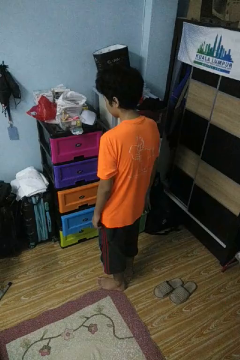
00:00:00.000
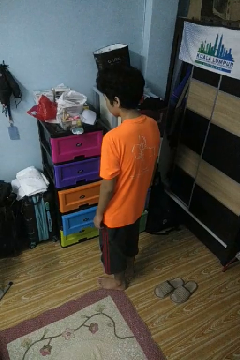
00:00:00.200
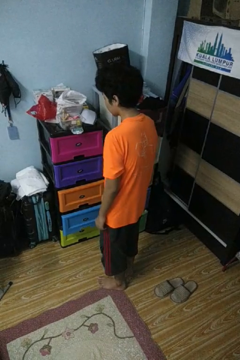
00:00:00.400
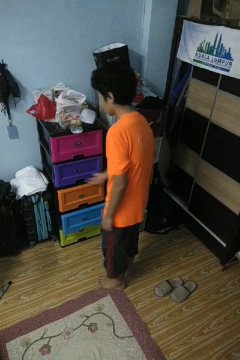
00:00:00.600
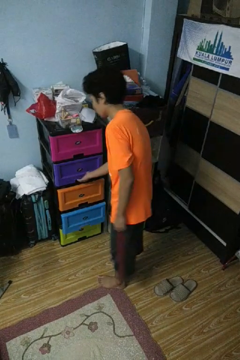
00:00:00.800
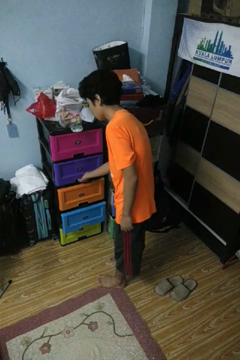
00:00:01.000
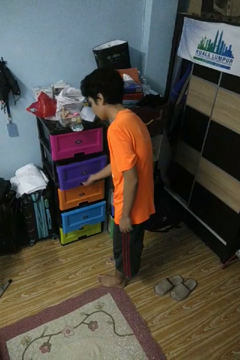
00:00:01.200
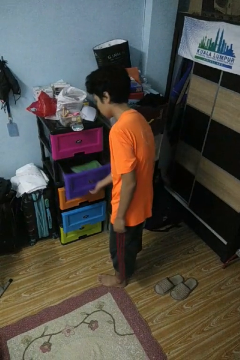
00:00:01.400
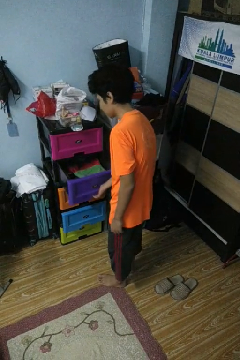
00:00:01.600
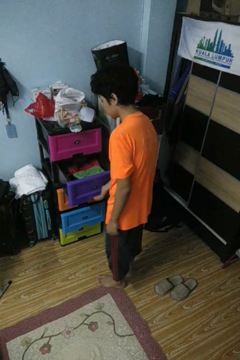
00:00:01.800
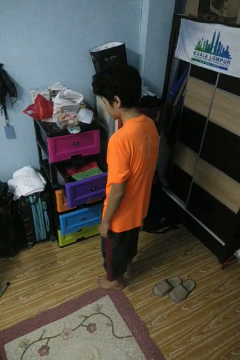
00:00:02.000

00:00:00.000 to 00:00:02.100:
person opens dresser drawer

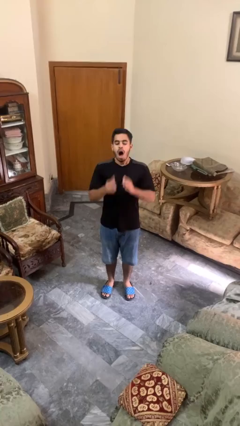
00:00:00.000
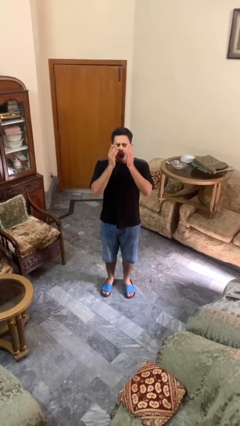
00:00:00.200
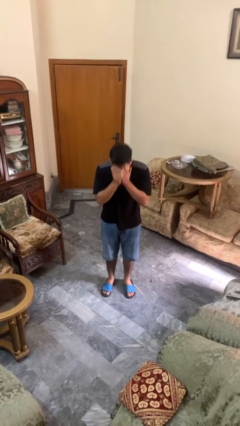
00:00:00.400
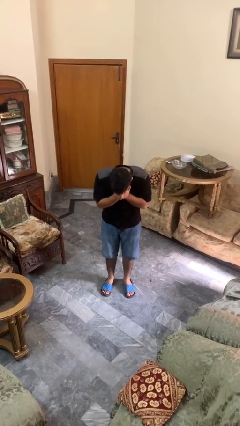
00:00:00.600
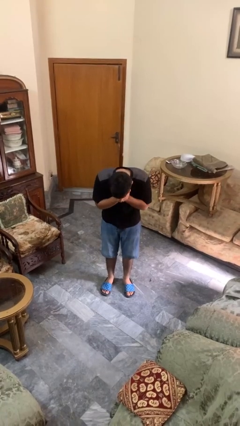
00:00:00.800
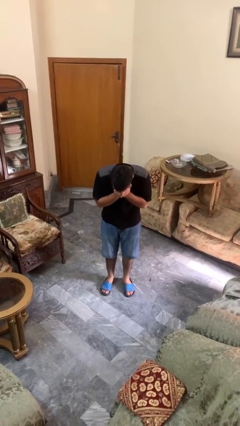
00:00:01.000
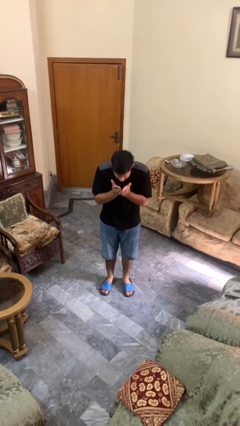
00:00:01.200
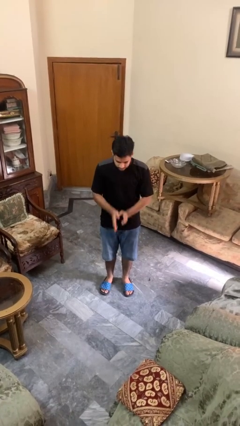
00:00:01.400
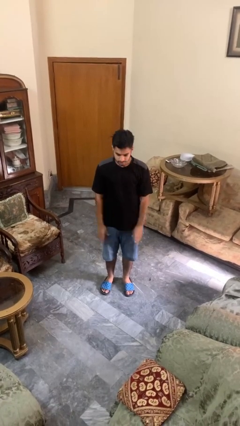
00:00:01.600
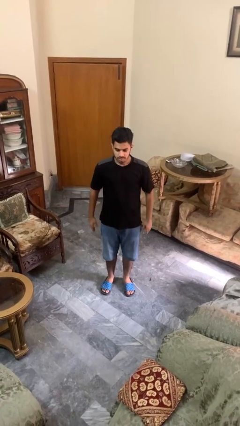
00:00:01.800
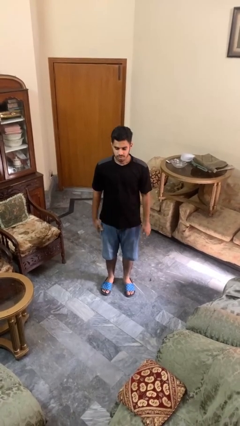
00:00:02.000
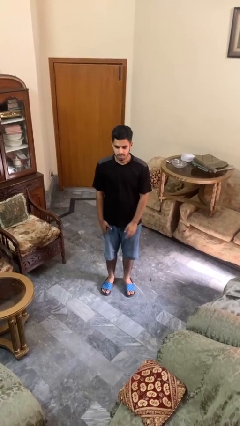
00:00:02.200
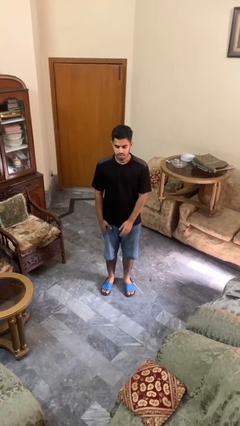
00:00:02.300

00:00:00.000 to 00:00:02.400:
person sneezes into hand

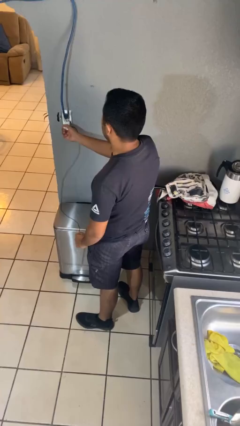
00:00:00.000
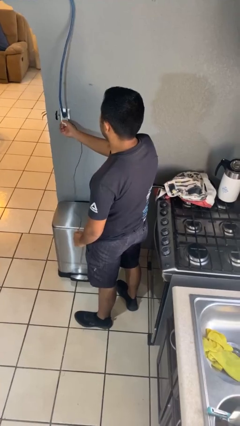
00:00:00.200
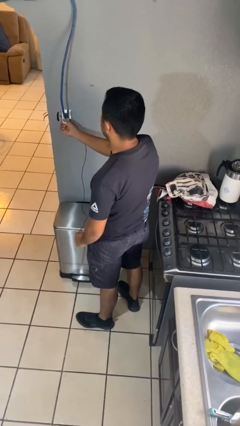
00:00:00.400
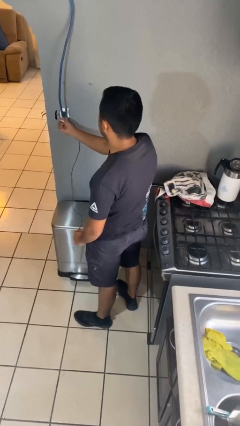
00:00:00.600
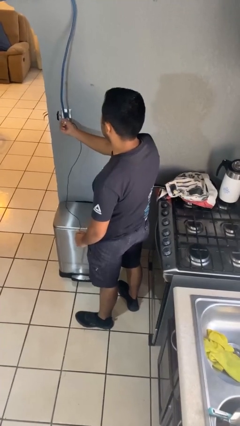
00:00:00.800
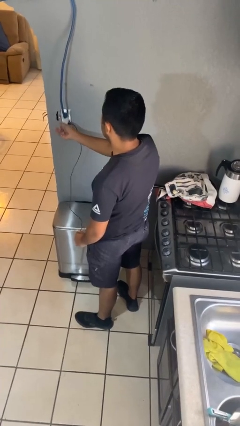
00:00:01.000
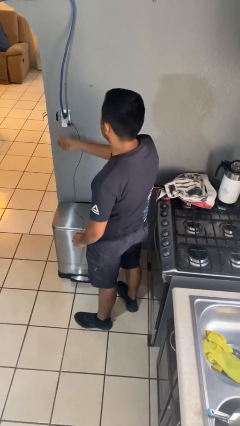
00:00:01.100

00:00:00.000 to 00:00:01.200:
person plugs into electrical socket

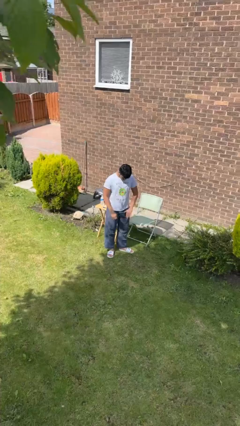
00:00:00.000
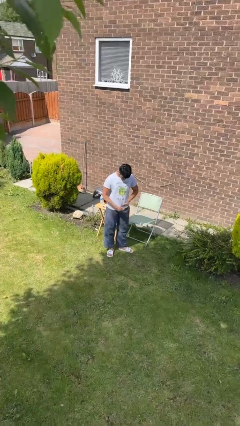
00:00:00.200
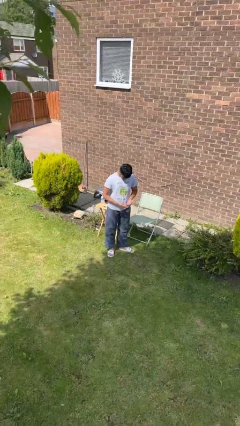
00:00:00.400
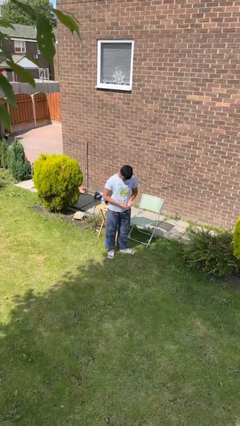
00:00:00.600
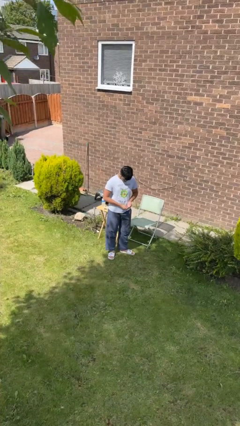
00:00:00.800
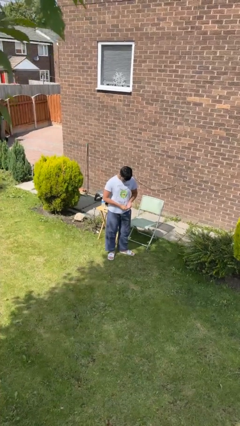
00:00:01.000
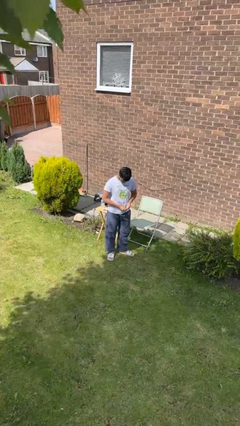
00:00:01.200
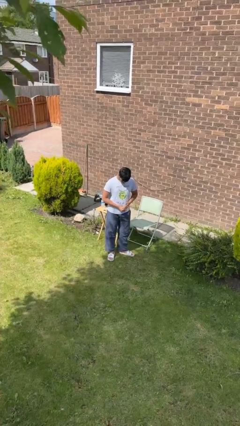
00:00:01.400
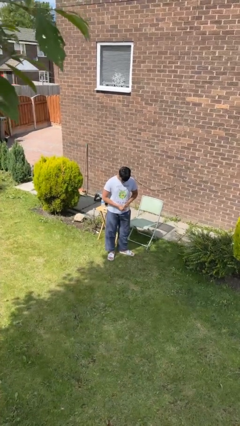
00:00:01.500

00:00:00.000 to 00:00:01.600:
person takes off ring

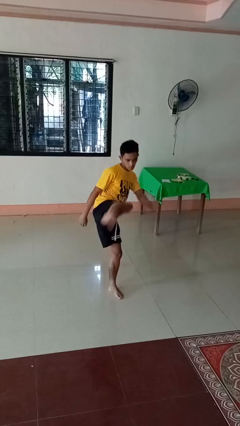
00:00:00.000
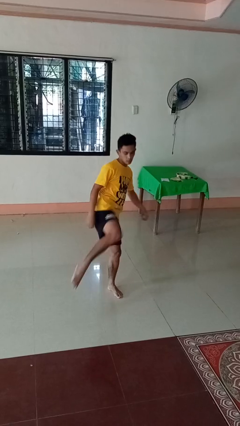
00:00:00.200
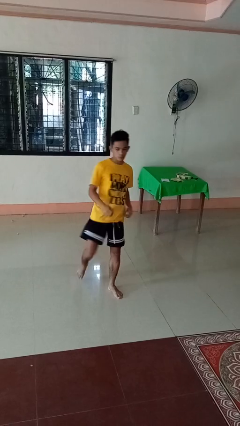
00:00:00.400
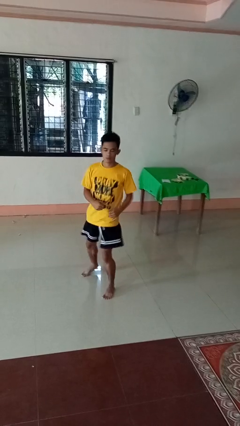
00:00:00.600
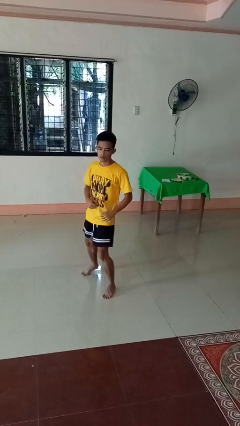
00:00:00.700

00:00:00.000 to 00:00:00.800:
person karate kicks

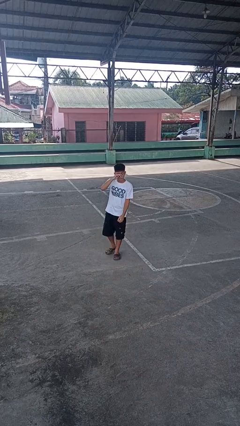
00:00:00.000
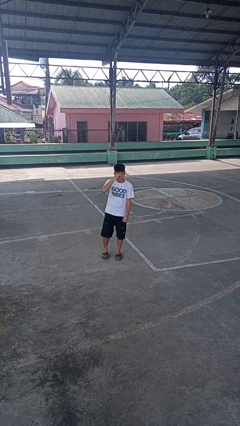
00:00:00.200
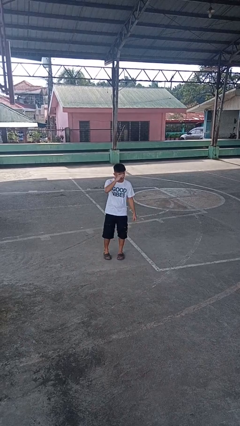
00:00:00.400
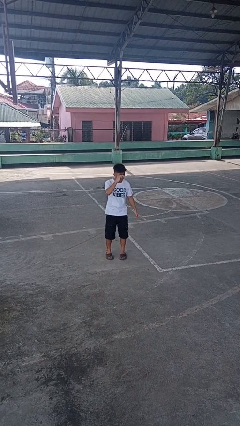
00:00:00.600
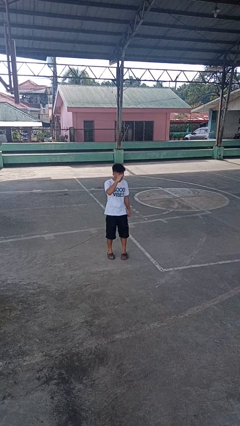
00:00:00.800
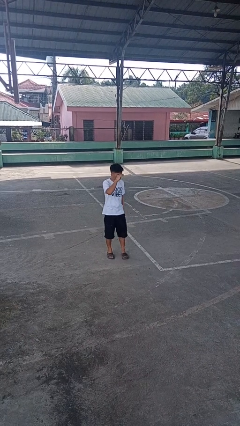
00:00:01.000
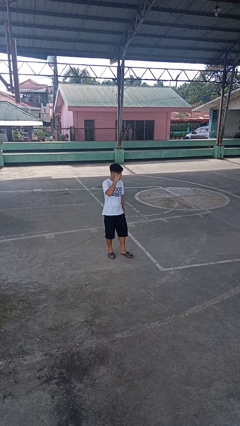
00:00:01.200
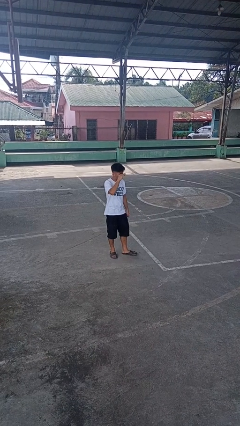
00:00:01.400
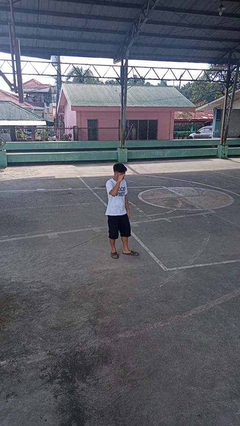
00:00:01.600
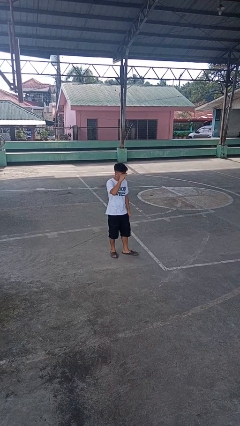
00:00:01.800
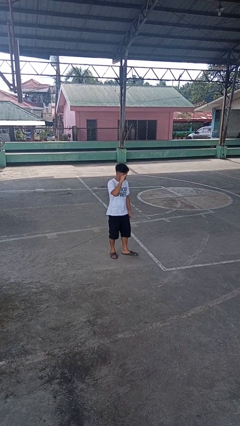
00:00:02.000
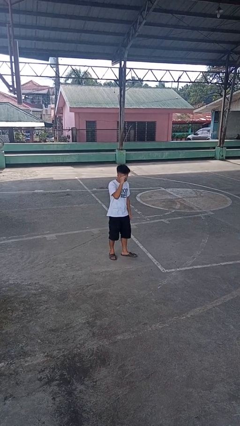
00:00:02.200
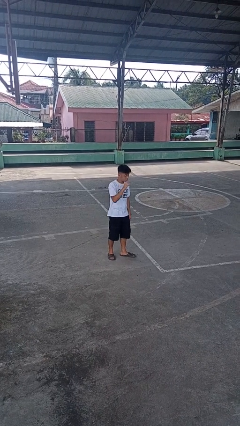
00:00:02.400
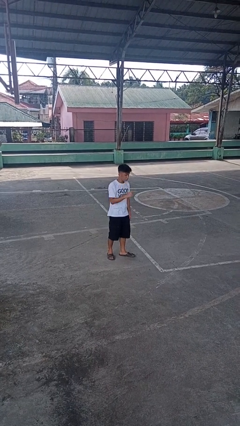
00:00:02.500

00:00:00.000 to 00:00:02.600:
person rubs eyes

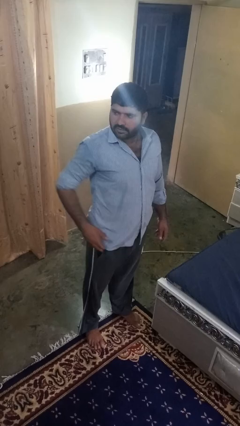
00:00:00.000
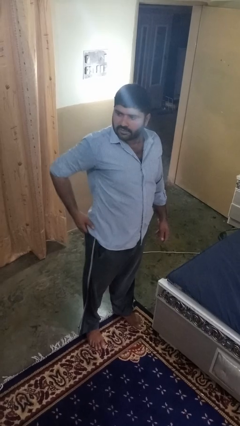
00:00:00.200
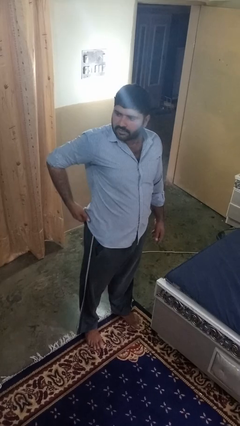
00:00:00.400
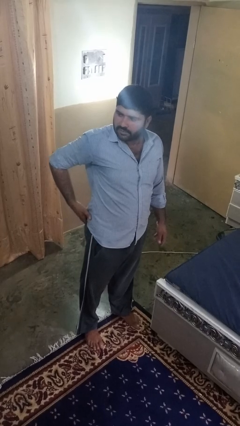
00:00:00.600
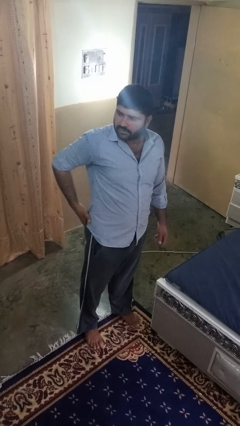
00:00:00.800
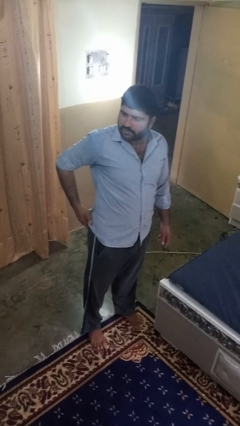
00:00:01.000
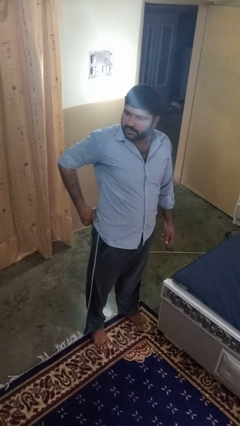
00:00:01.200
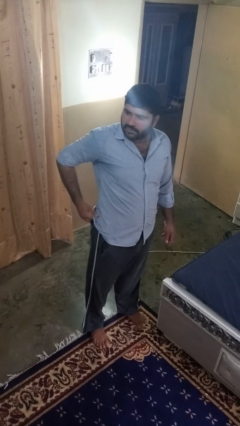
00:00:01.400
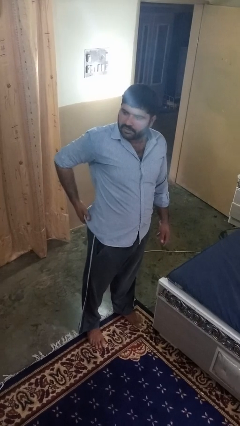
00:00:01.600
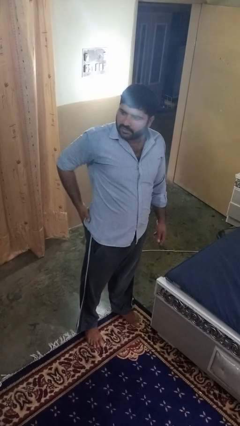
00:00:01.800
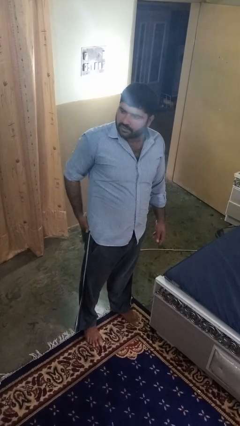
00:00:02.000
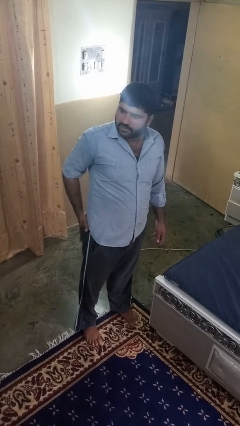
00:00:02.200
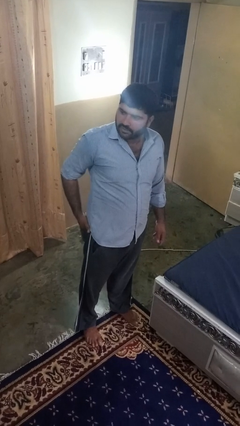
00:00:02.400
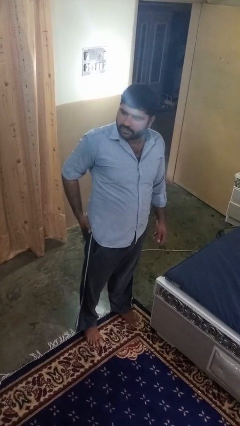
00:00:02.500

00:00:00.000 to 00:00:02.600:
person puts hands in back pockets

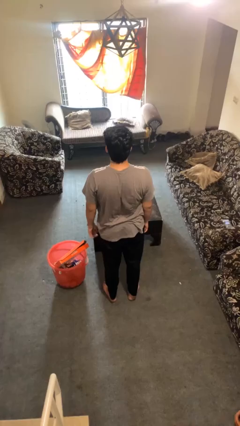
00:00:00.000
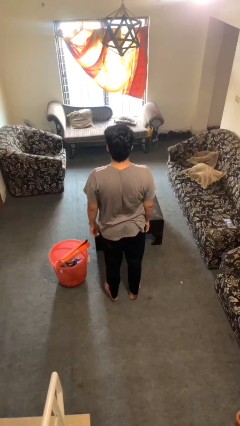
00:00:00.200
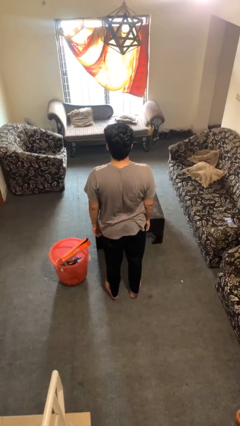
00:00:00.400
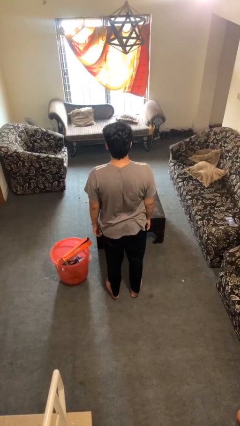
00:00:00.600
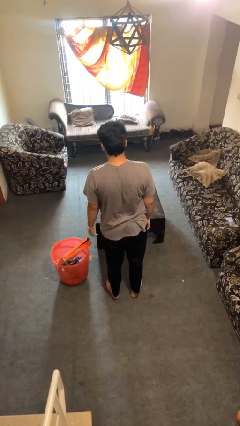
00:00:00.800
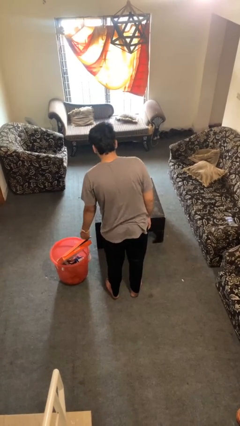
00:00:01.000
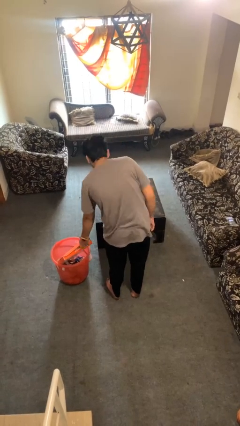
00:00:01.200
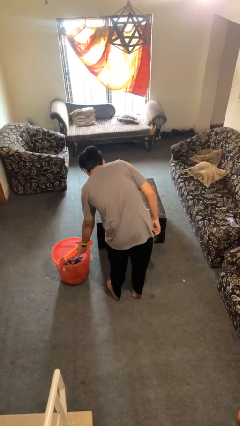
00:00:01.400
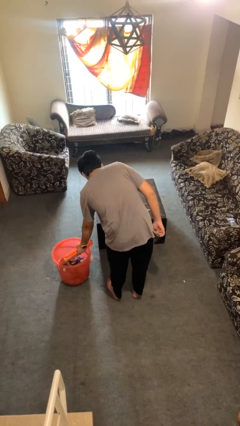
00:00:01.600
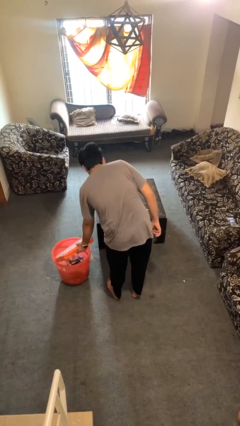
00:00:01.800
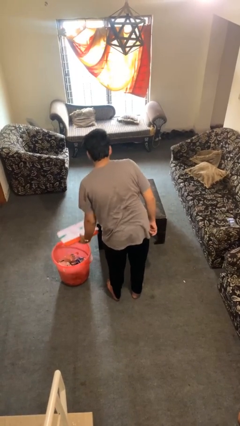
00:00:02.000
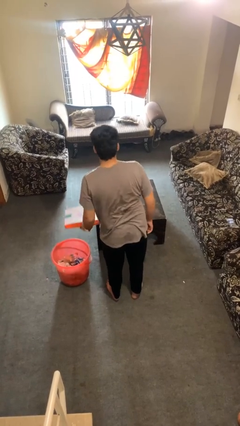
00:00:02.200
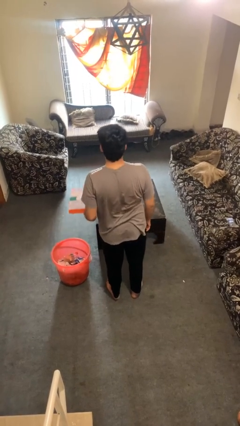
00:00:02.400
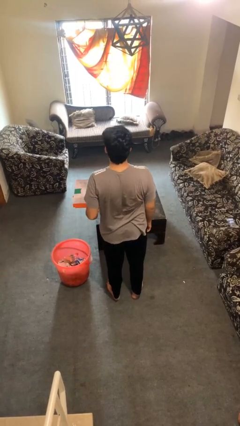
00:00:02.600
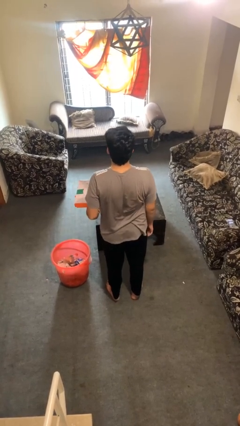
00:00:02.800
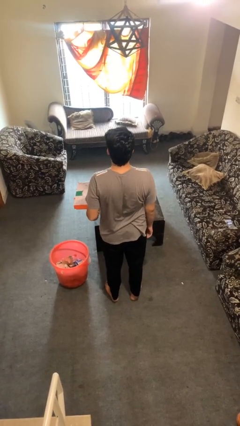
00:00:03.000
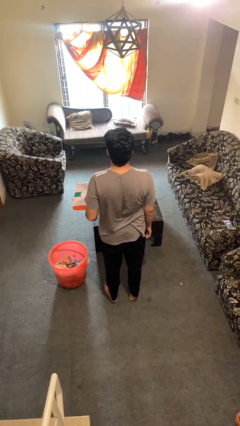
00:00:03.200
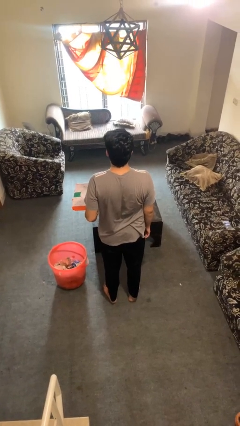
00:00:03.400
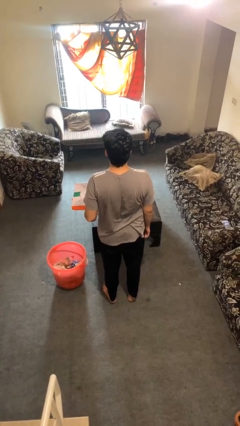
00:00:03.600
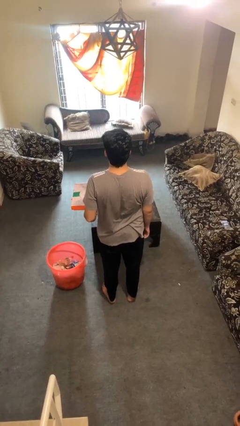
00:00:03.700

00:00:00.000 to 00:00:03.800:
person takes object from basket

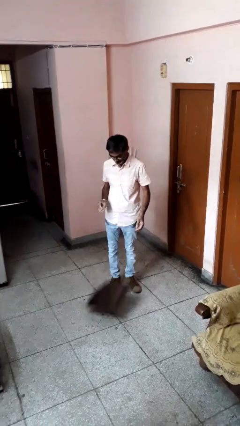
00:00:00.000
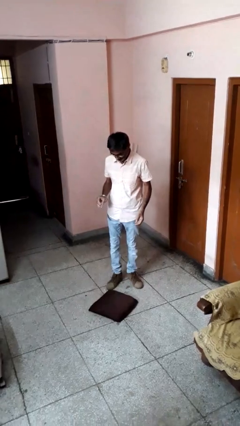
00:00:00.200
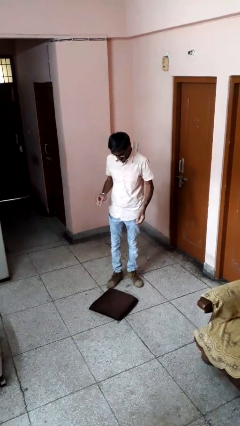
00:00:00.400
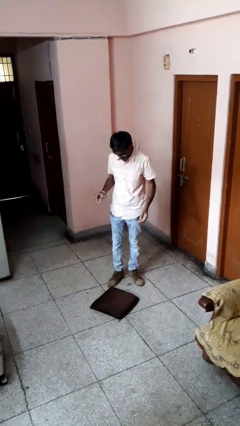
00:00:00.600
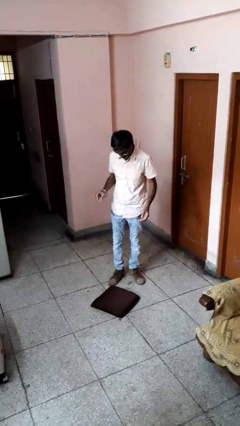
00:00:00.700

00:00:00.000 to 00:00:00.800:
person drops object
